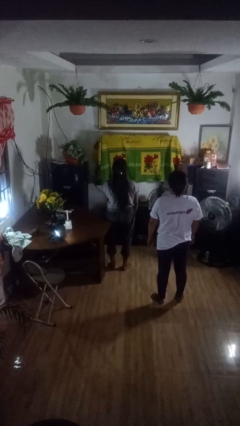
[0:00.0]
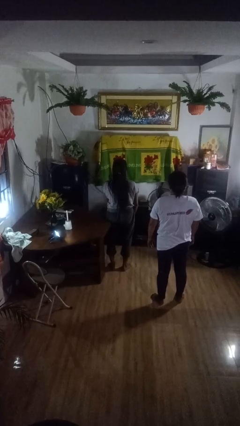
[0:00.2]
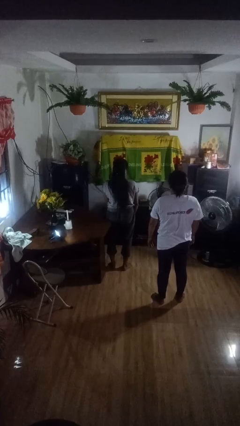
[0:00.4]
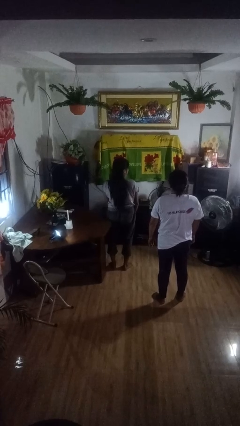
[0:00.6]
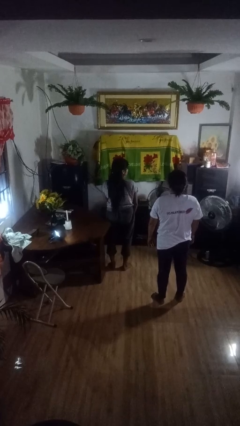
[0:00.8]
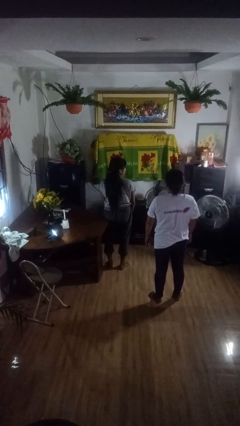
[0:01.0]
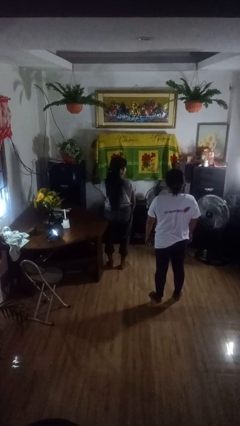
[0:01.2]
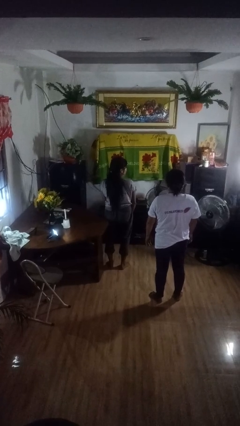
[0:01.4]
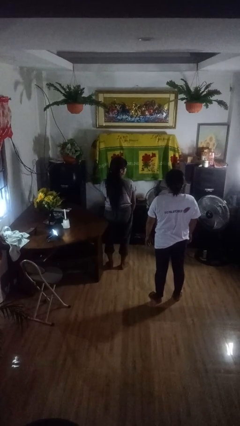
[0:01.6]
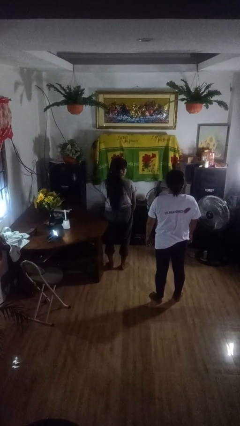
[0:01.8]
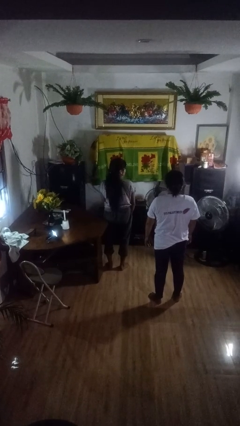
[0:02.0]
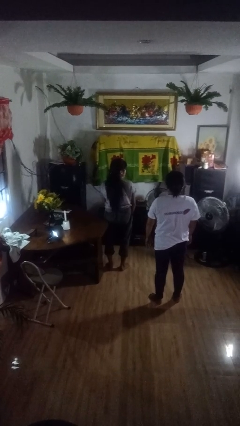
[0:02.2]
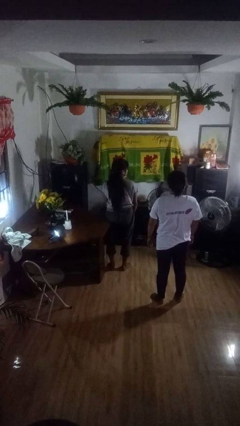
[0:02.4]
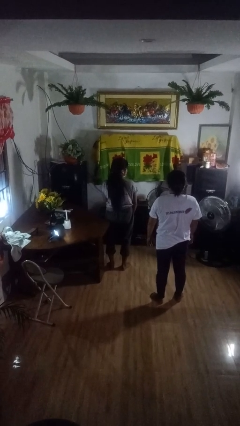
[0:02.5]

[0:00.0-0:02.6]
person looks over shoulder

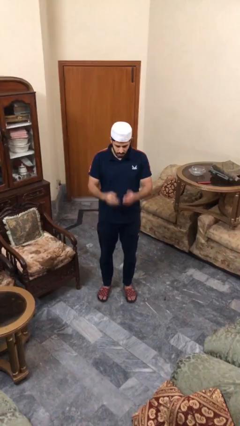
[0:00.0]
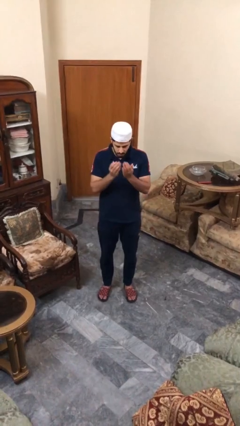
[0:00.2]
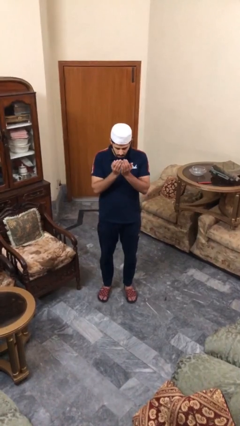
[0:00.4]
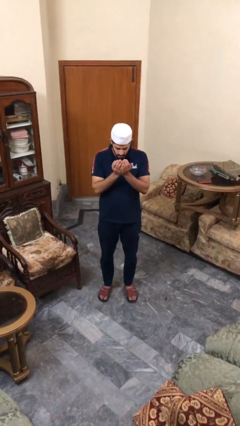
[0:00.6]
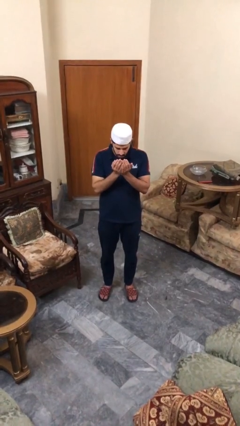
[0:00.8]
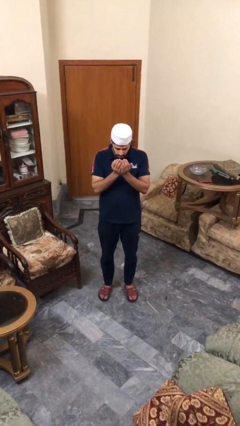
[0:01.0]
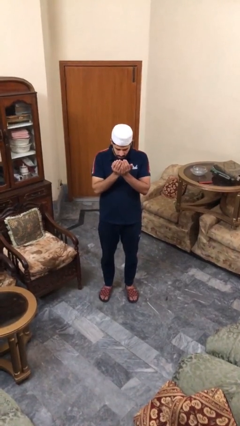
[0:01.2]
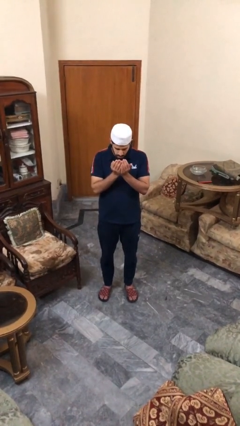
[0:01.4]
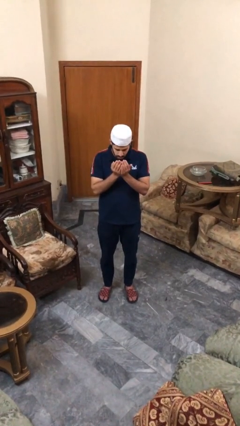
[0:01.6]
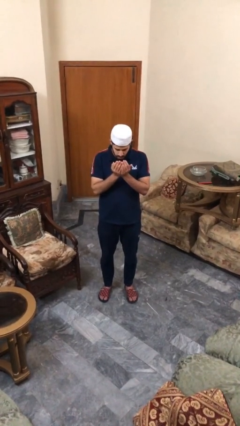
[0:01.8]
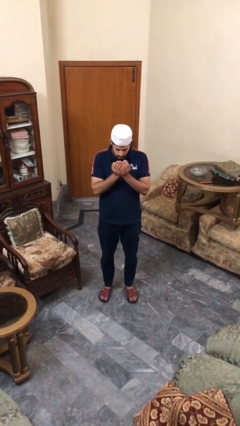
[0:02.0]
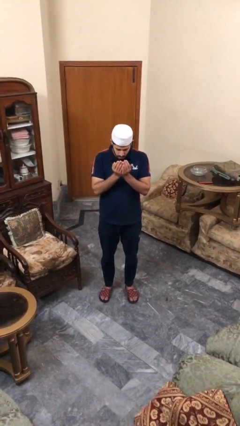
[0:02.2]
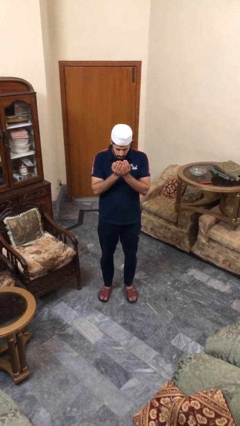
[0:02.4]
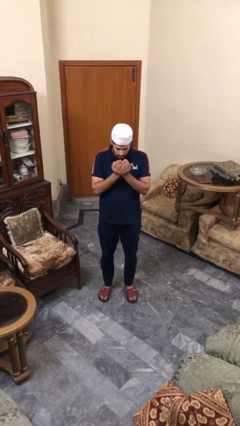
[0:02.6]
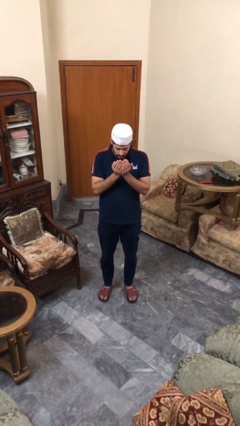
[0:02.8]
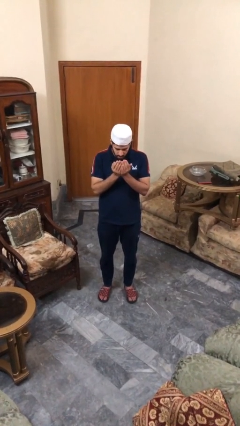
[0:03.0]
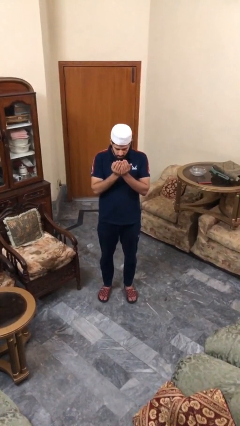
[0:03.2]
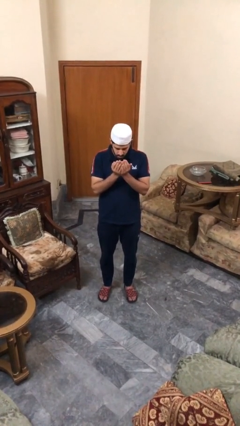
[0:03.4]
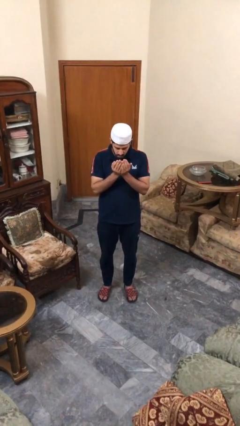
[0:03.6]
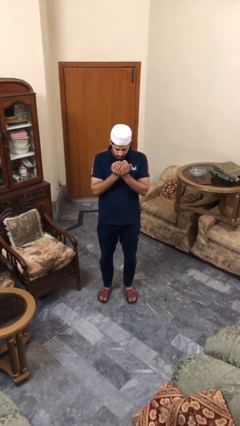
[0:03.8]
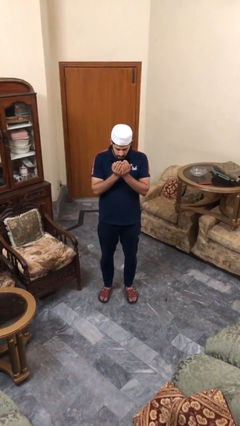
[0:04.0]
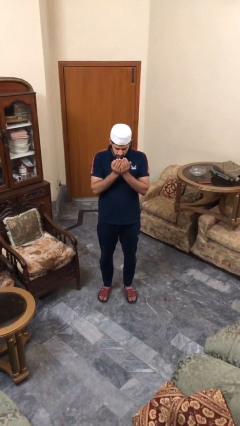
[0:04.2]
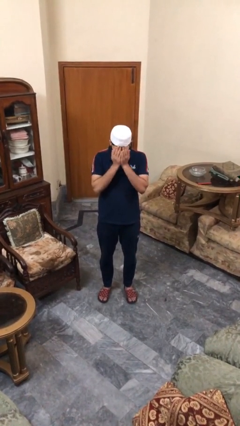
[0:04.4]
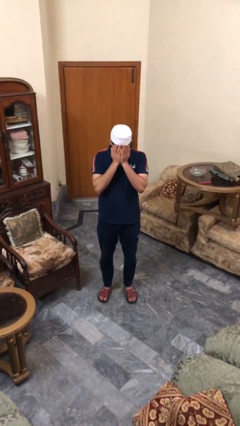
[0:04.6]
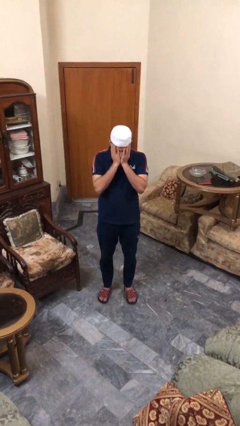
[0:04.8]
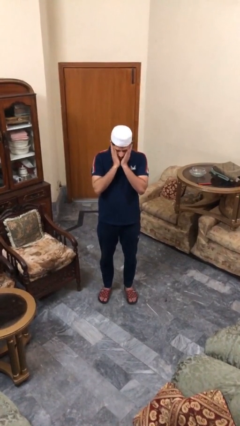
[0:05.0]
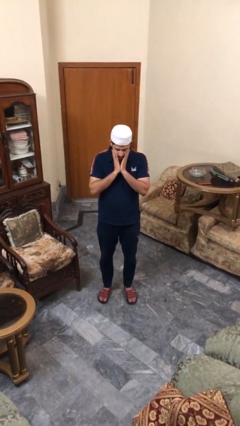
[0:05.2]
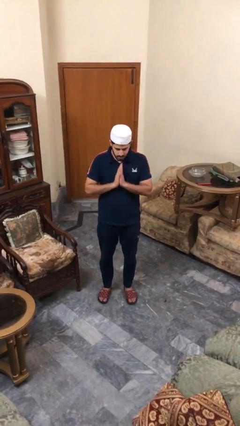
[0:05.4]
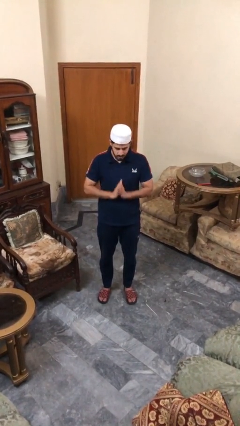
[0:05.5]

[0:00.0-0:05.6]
person prays

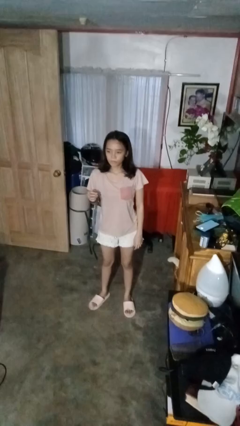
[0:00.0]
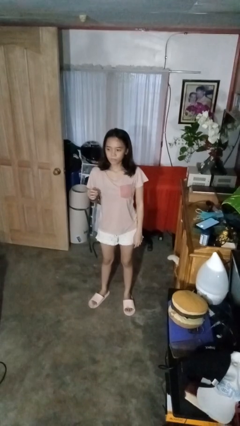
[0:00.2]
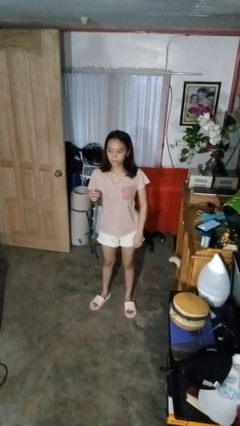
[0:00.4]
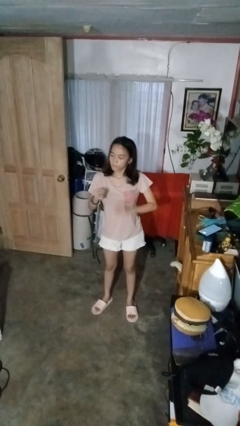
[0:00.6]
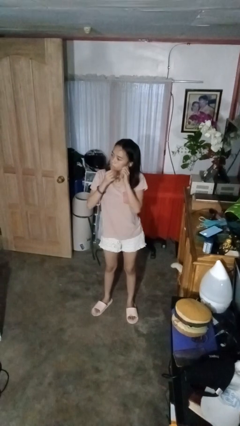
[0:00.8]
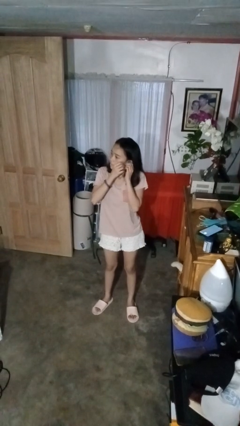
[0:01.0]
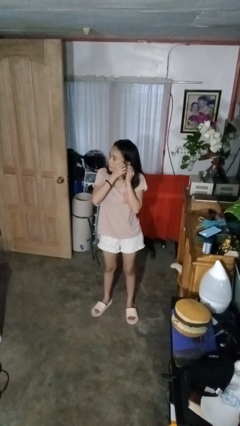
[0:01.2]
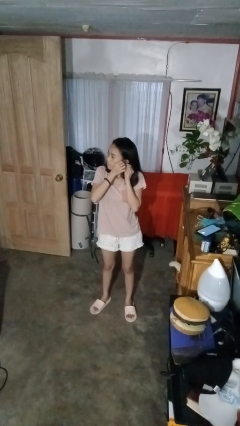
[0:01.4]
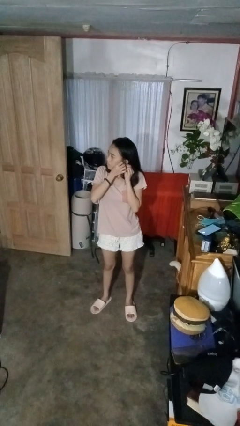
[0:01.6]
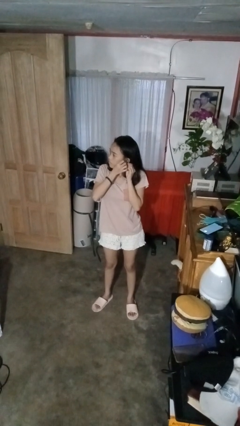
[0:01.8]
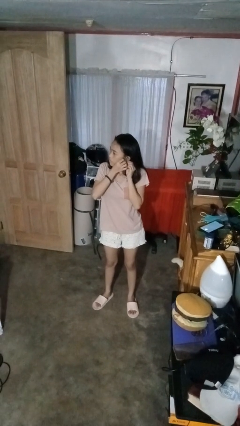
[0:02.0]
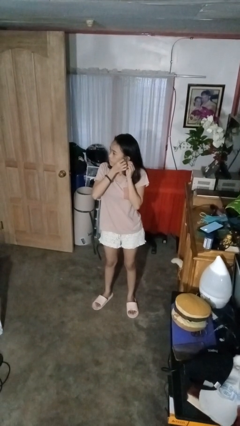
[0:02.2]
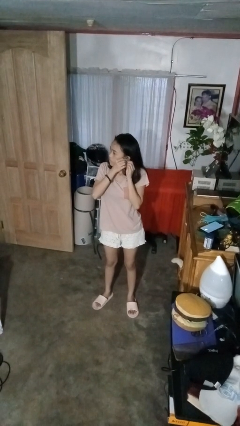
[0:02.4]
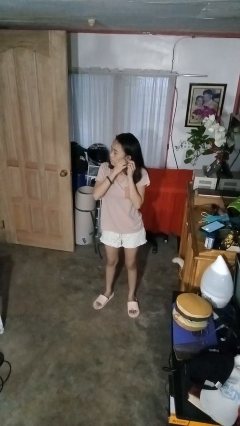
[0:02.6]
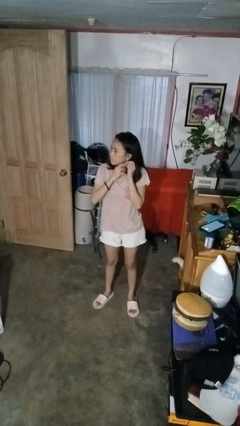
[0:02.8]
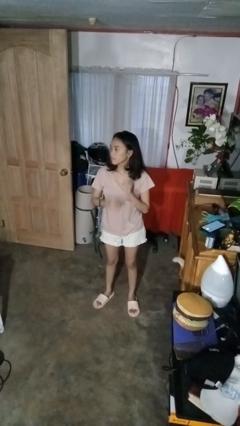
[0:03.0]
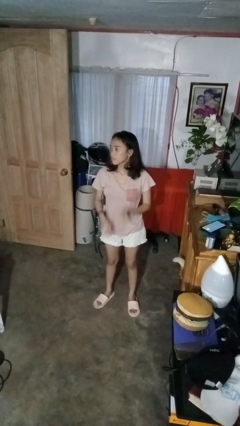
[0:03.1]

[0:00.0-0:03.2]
person puts on earrings

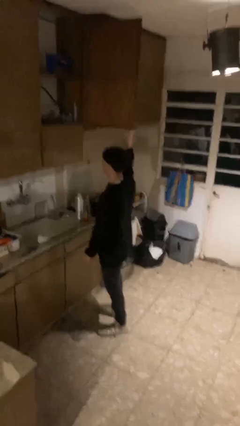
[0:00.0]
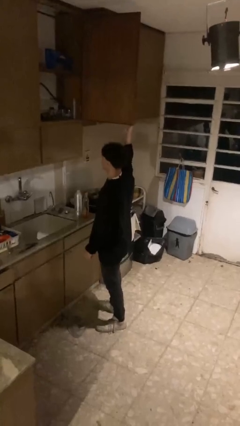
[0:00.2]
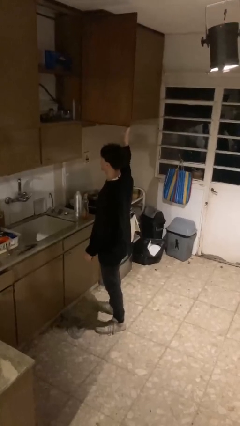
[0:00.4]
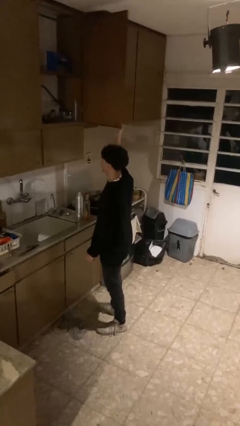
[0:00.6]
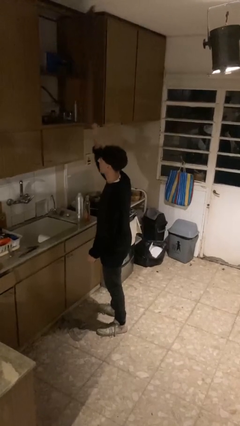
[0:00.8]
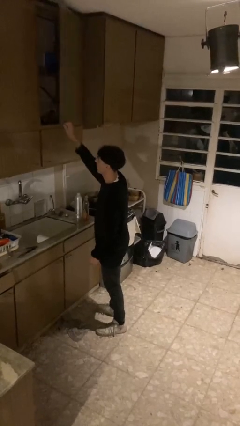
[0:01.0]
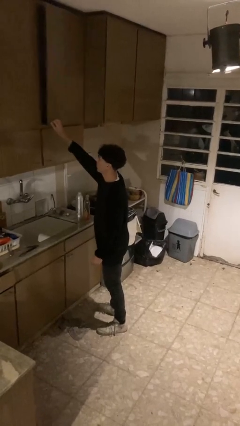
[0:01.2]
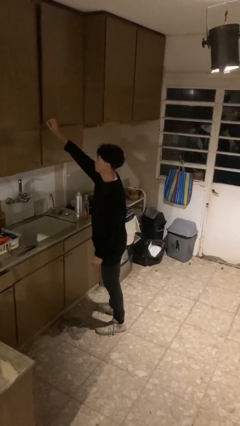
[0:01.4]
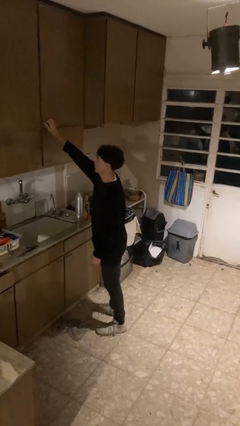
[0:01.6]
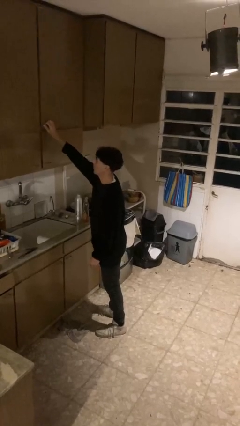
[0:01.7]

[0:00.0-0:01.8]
person closes cabinet

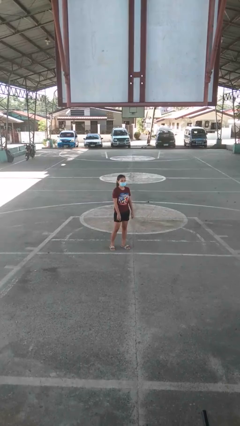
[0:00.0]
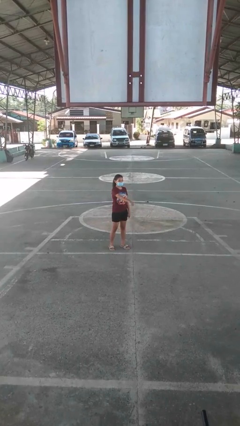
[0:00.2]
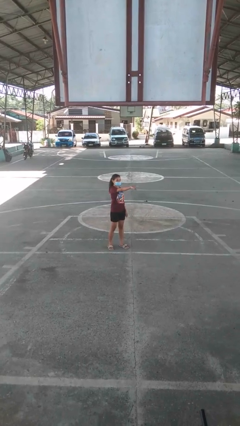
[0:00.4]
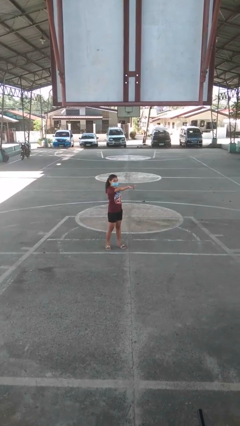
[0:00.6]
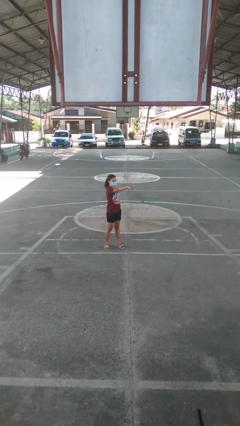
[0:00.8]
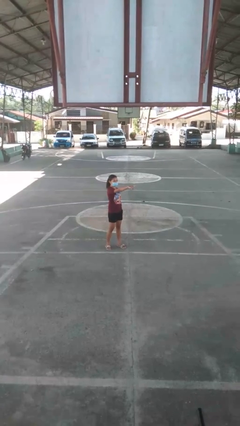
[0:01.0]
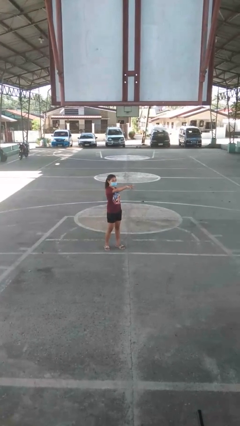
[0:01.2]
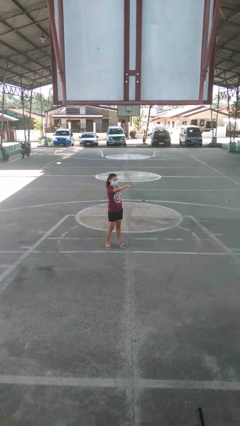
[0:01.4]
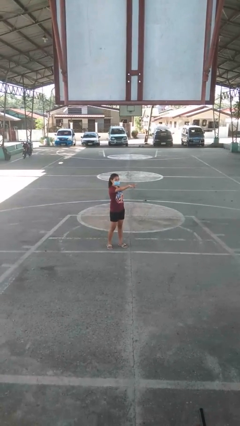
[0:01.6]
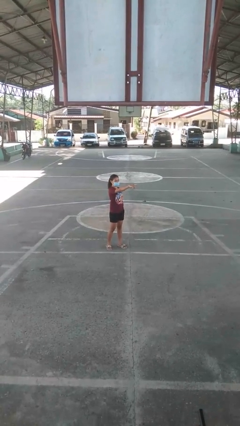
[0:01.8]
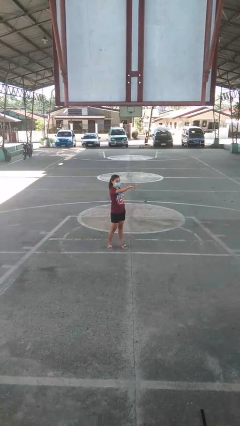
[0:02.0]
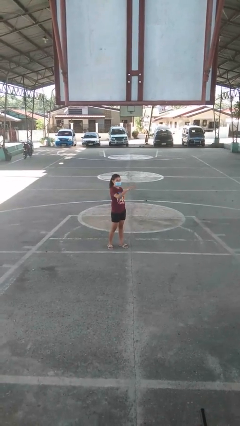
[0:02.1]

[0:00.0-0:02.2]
person points at person

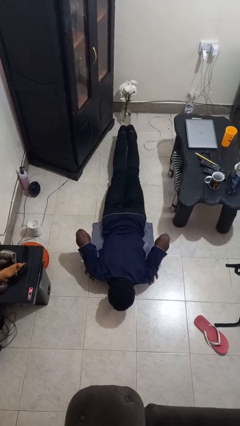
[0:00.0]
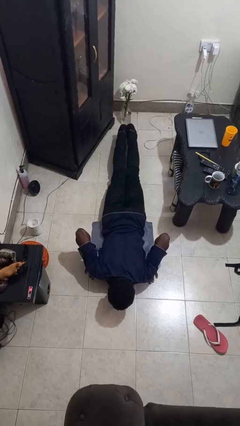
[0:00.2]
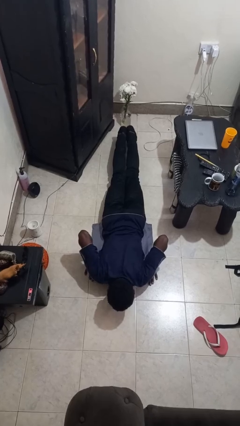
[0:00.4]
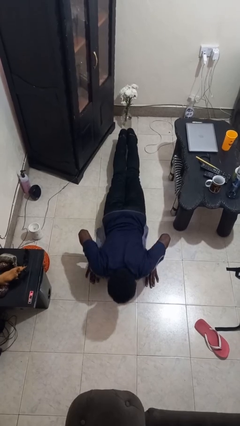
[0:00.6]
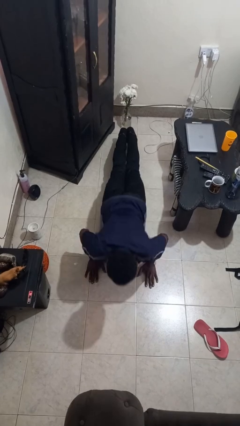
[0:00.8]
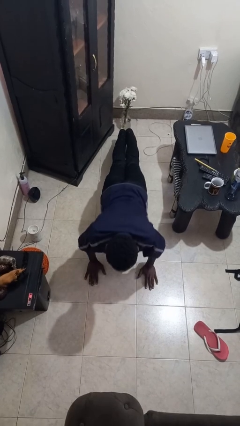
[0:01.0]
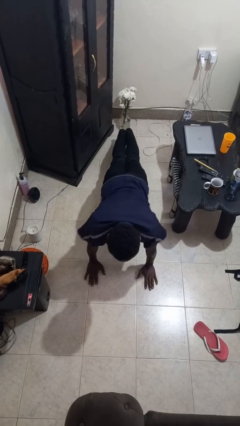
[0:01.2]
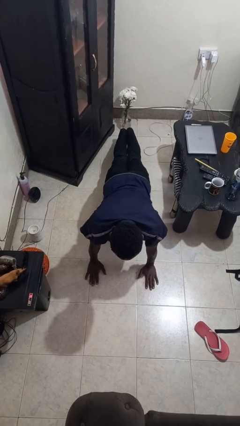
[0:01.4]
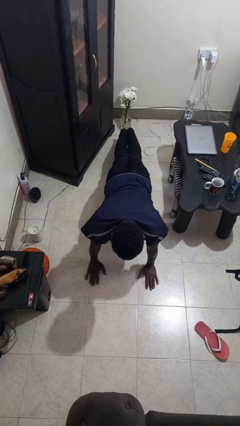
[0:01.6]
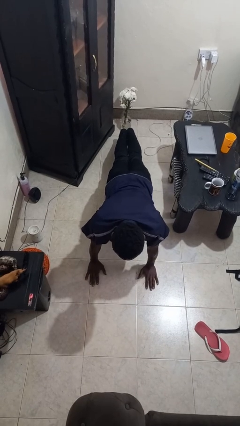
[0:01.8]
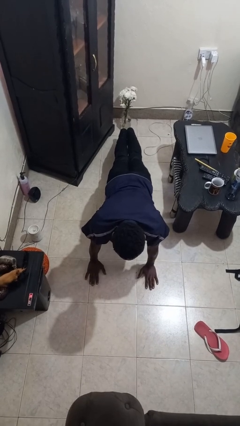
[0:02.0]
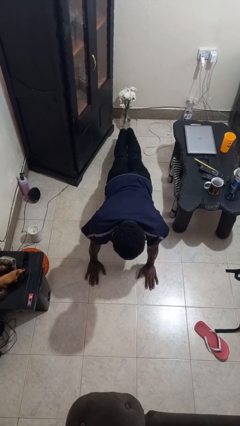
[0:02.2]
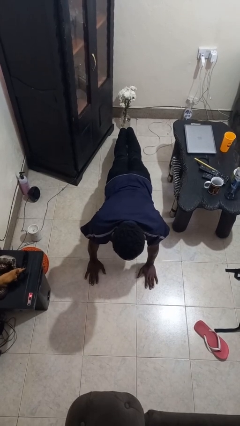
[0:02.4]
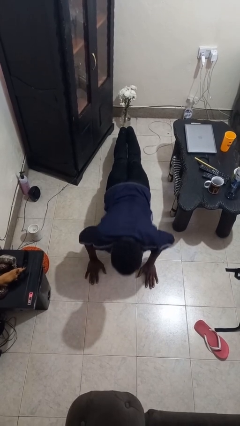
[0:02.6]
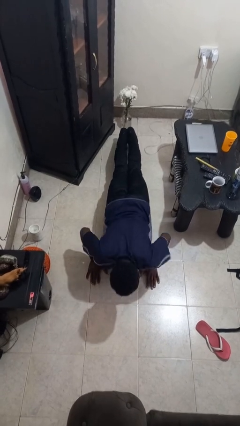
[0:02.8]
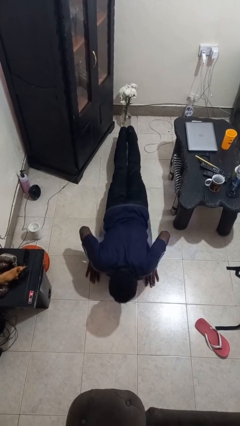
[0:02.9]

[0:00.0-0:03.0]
person exercises with pushup
